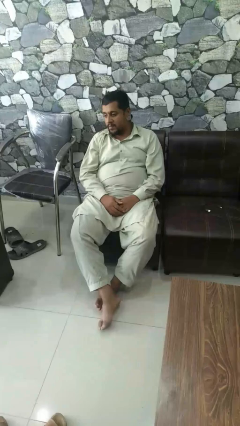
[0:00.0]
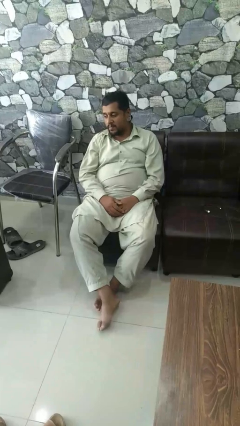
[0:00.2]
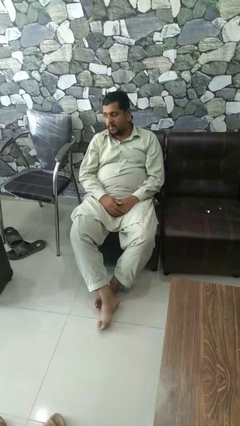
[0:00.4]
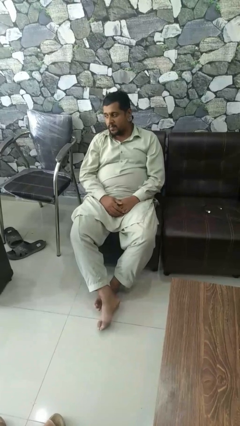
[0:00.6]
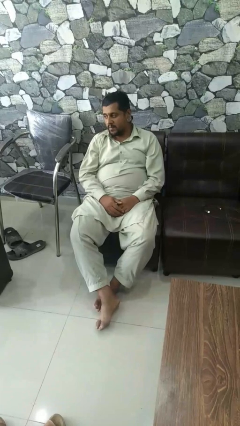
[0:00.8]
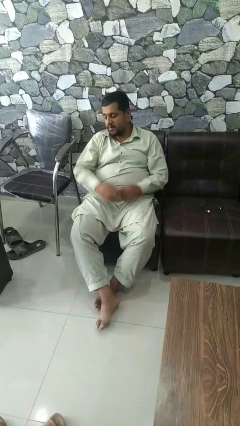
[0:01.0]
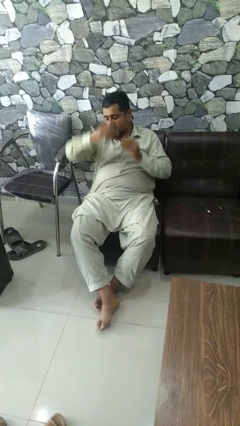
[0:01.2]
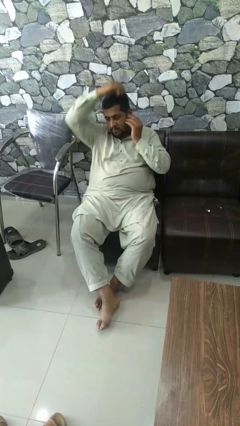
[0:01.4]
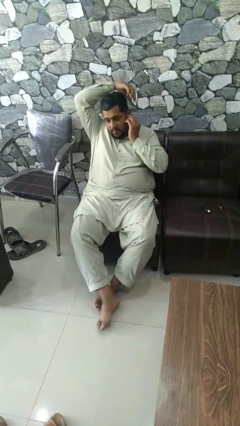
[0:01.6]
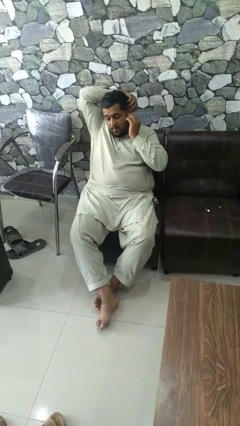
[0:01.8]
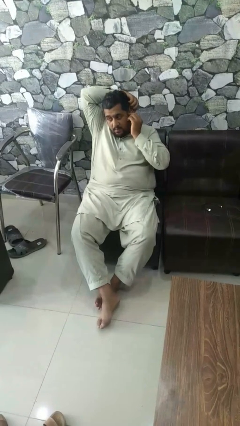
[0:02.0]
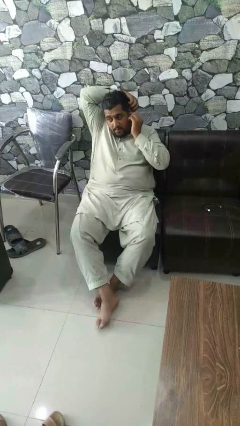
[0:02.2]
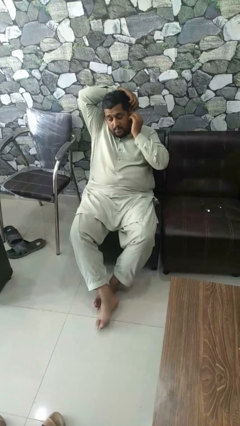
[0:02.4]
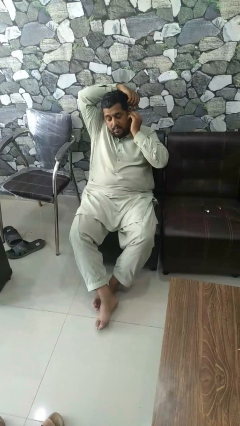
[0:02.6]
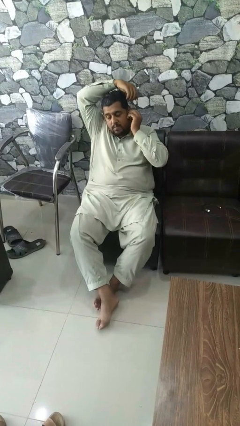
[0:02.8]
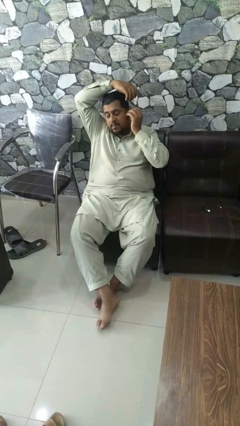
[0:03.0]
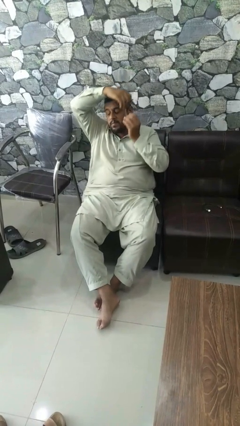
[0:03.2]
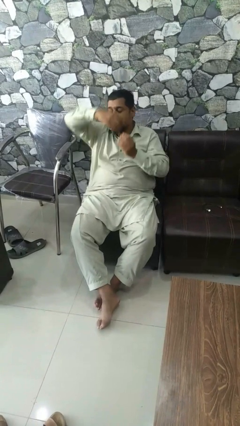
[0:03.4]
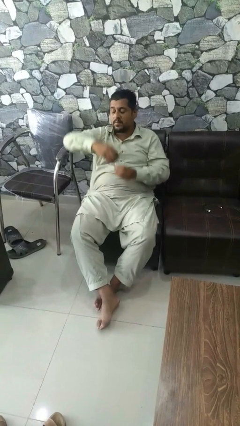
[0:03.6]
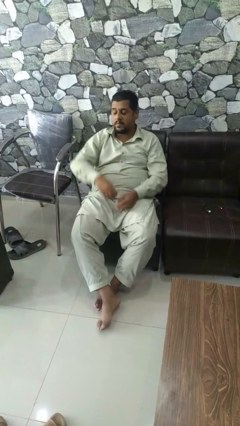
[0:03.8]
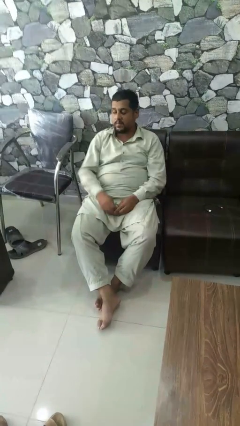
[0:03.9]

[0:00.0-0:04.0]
person takes off earrings

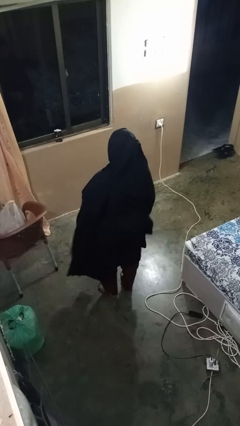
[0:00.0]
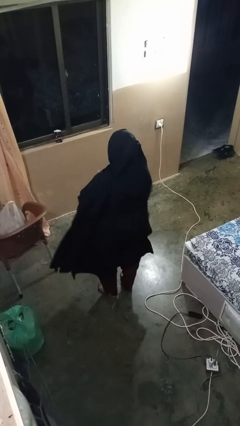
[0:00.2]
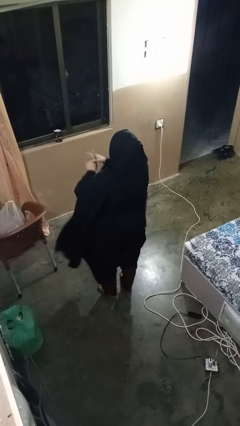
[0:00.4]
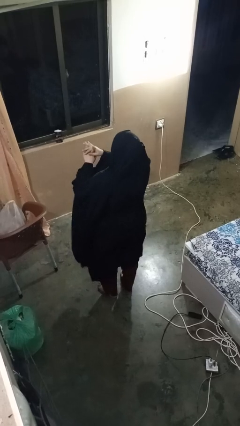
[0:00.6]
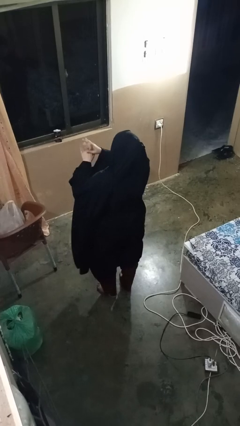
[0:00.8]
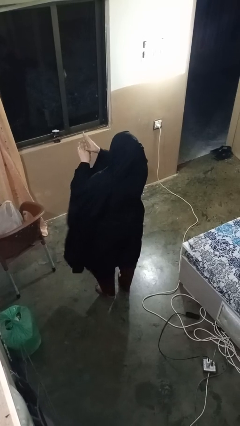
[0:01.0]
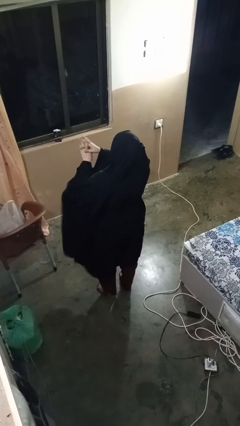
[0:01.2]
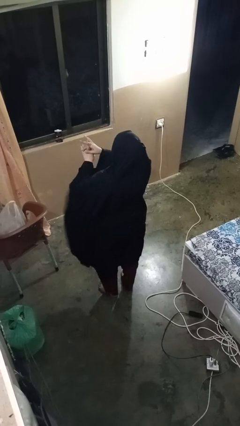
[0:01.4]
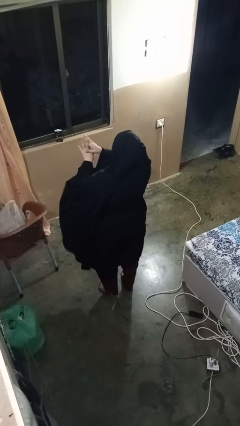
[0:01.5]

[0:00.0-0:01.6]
person cracks knuckles

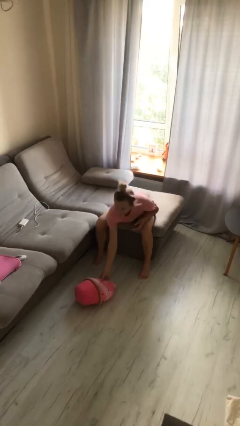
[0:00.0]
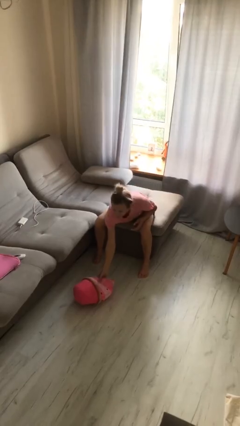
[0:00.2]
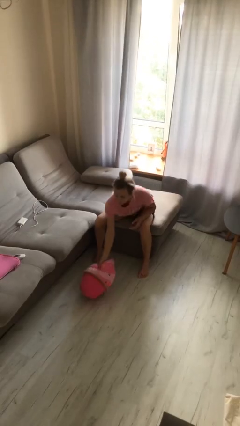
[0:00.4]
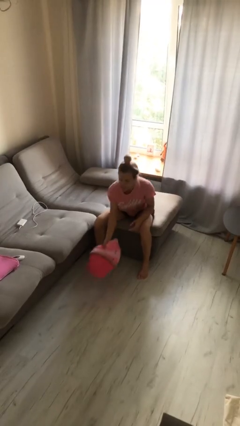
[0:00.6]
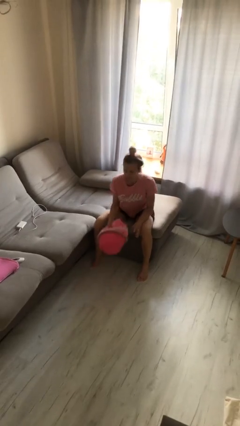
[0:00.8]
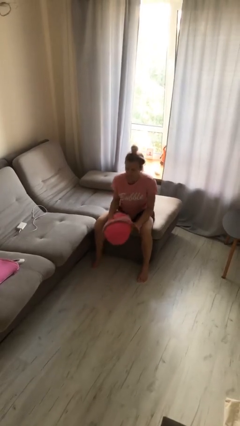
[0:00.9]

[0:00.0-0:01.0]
person picks up object from floor

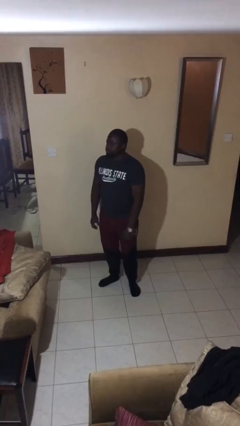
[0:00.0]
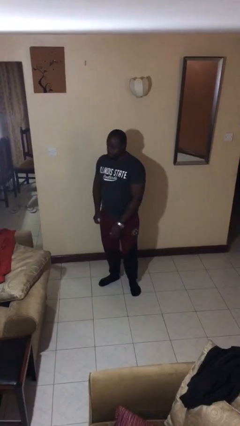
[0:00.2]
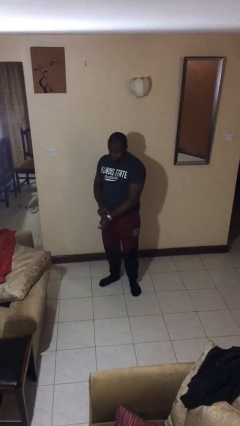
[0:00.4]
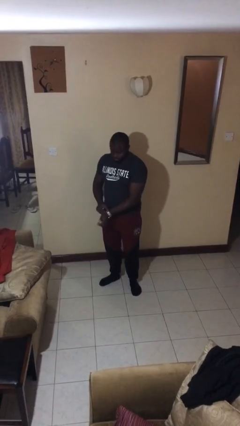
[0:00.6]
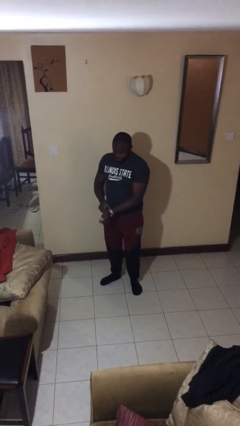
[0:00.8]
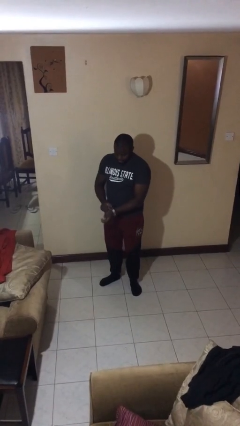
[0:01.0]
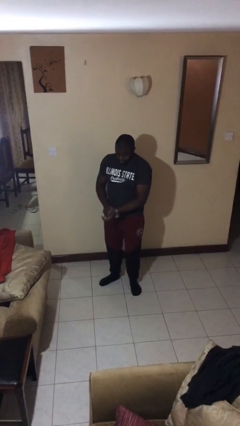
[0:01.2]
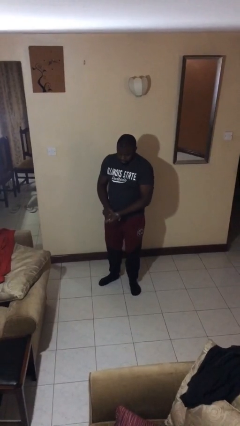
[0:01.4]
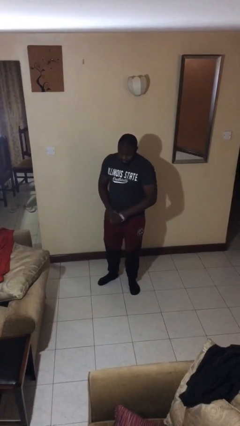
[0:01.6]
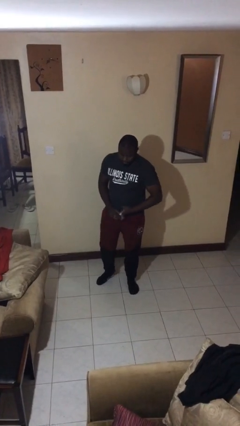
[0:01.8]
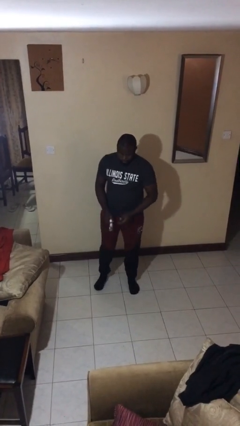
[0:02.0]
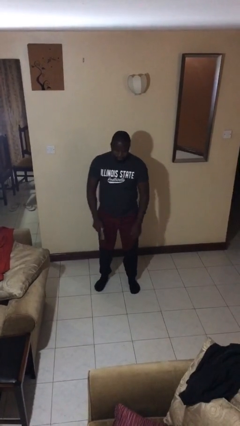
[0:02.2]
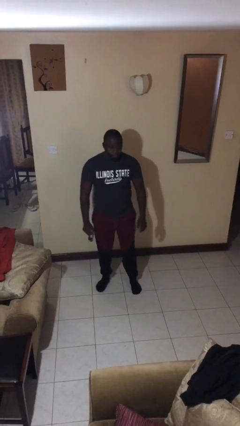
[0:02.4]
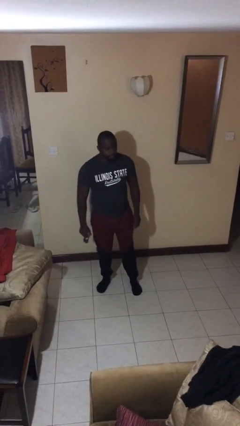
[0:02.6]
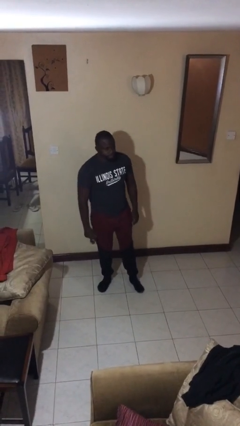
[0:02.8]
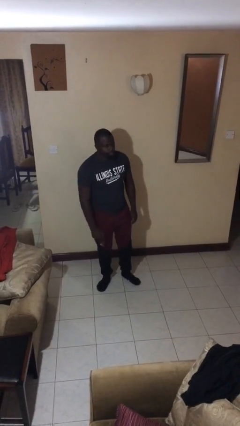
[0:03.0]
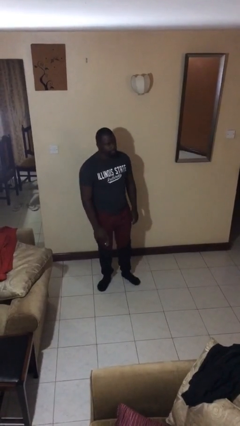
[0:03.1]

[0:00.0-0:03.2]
person takes off wristwatch

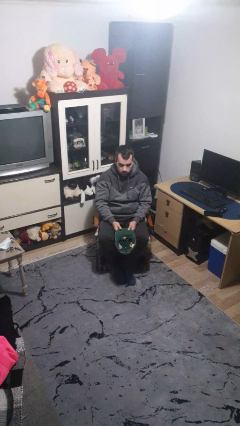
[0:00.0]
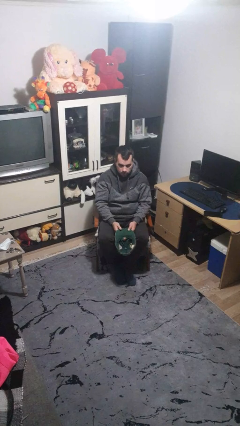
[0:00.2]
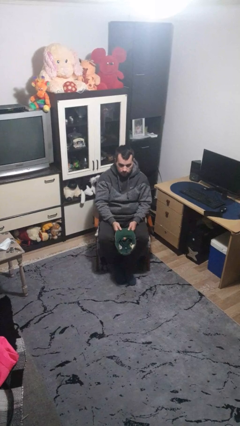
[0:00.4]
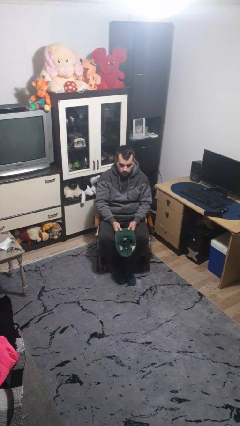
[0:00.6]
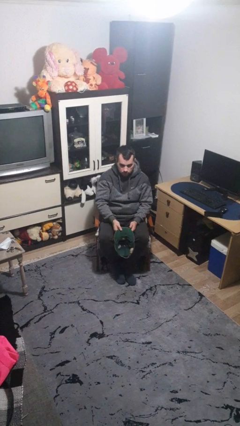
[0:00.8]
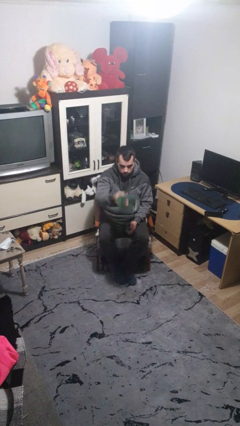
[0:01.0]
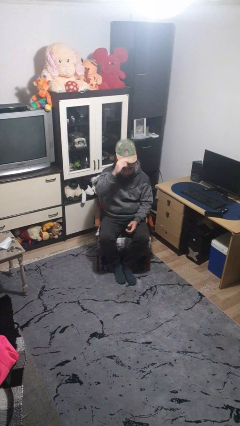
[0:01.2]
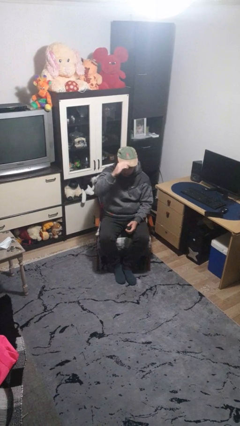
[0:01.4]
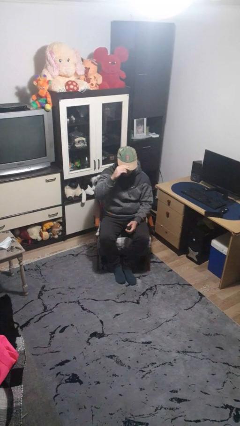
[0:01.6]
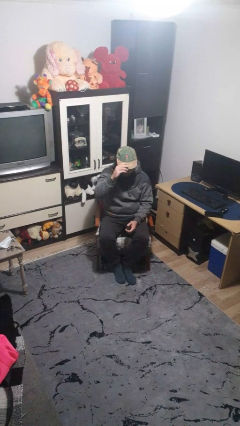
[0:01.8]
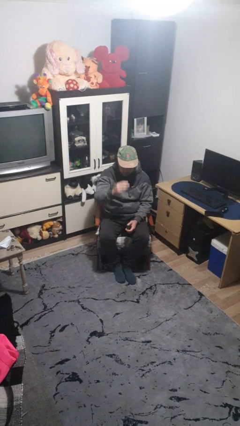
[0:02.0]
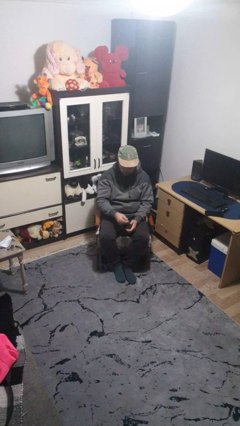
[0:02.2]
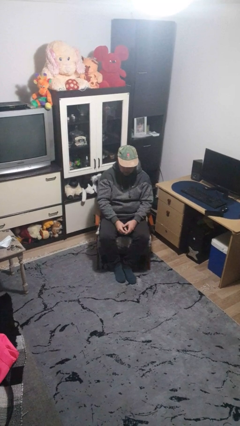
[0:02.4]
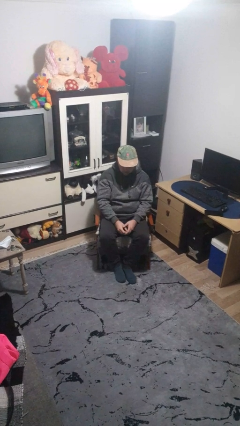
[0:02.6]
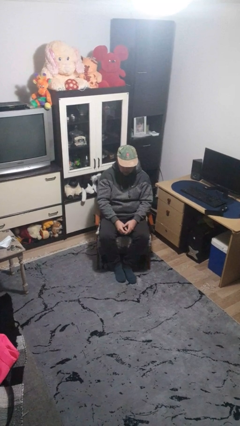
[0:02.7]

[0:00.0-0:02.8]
person puts on hat

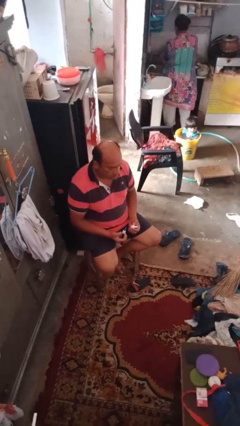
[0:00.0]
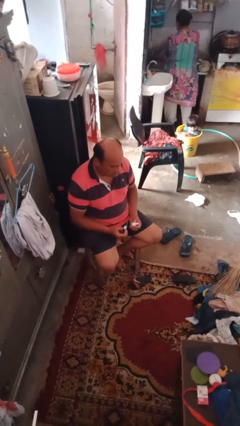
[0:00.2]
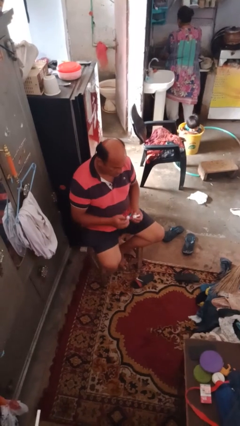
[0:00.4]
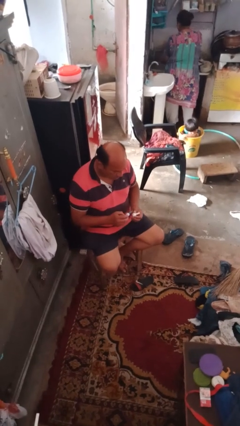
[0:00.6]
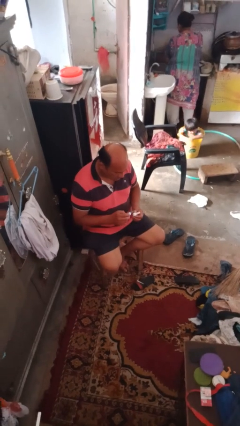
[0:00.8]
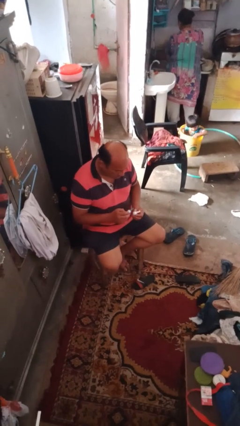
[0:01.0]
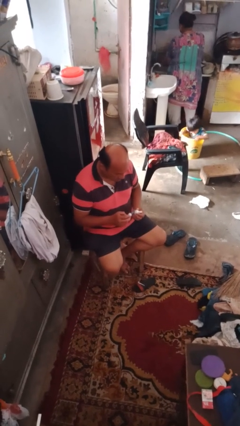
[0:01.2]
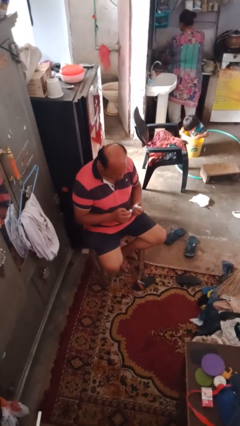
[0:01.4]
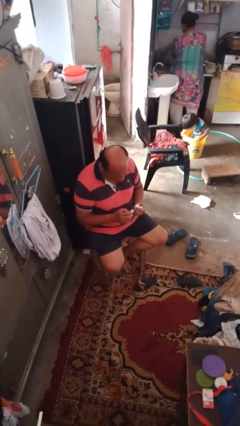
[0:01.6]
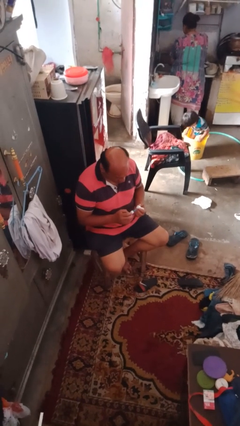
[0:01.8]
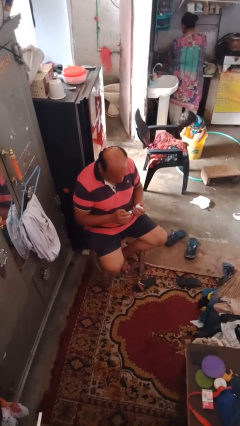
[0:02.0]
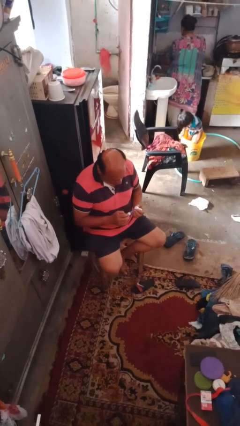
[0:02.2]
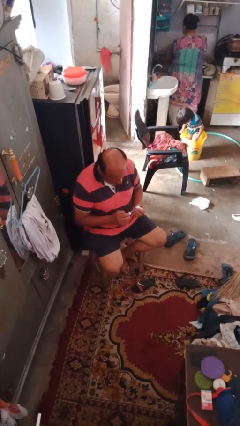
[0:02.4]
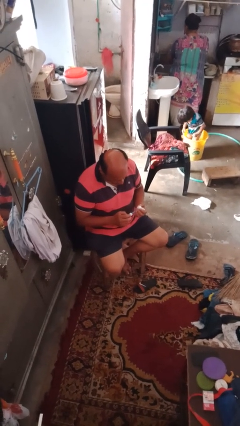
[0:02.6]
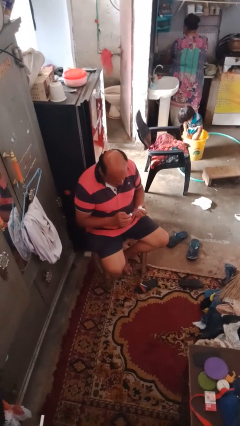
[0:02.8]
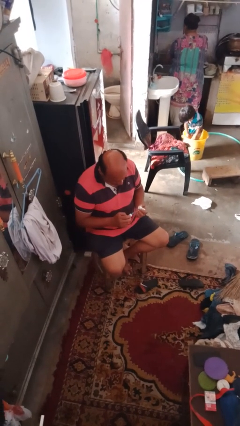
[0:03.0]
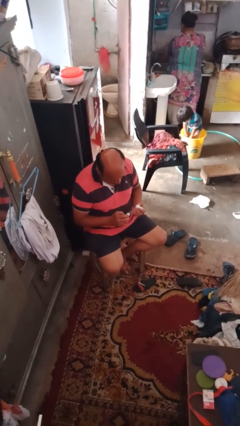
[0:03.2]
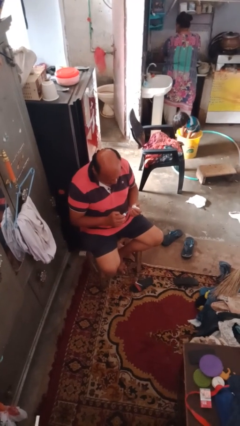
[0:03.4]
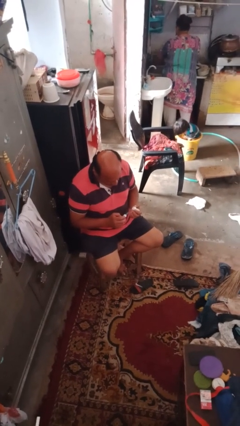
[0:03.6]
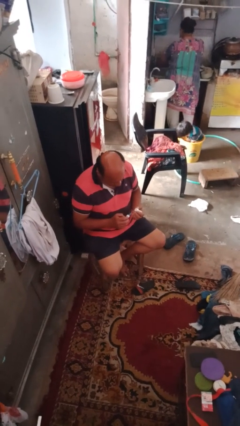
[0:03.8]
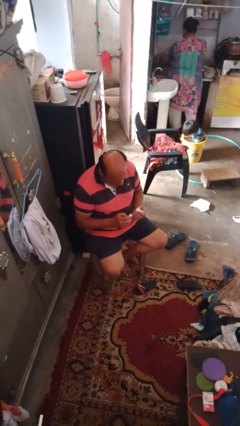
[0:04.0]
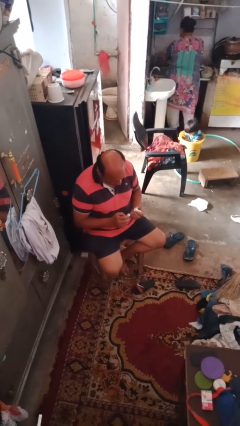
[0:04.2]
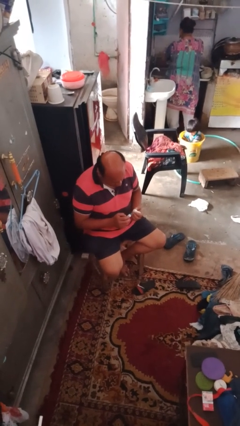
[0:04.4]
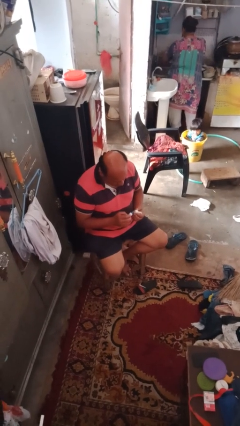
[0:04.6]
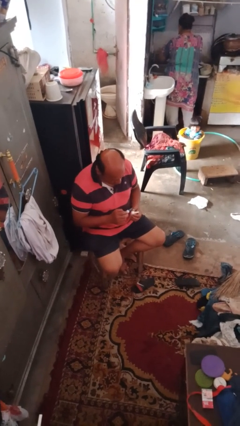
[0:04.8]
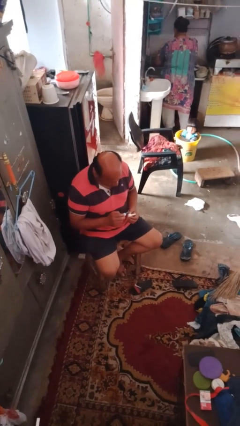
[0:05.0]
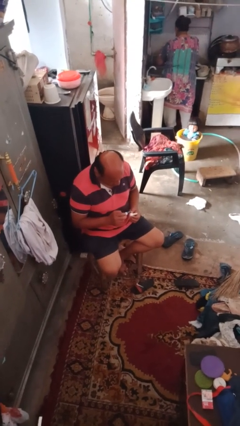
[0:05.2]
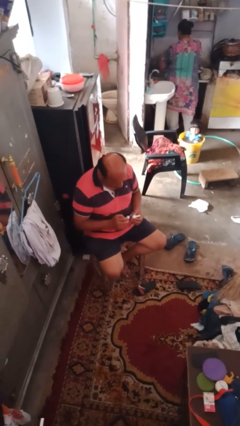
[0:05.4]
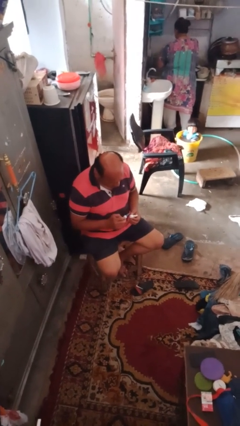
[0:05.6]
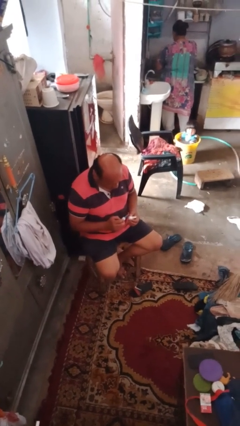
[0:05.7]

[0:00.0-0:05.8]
person paints fingernails
